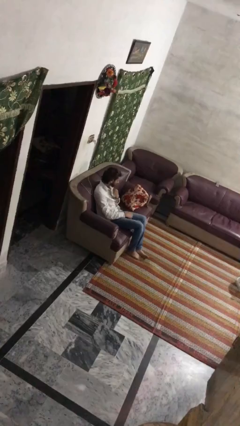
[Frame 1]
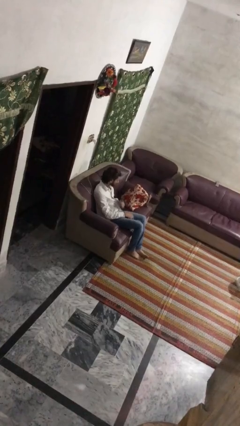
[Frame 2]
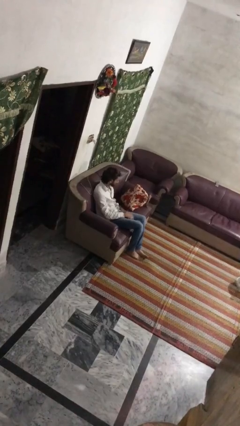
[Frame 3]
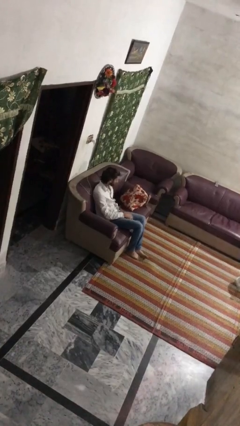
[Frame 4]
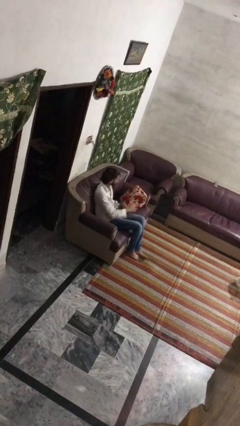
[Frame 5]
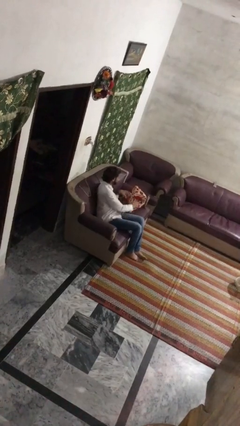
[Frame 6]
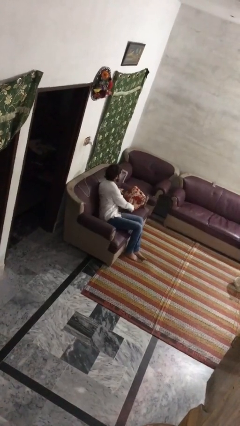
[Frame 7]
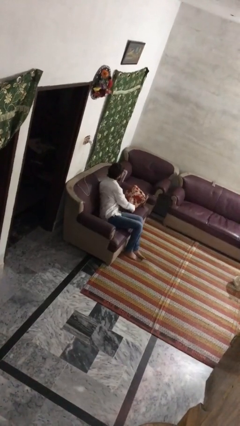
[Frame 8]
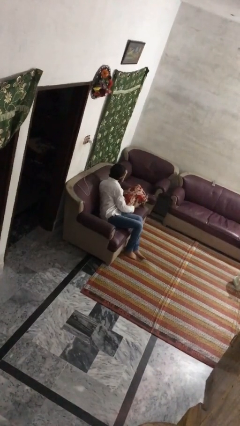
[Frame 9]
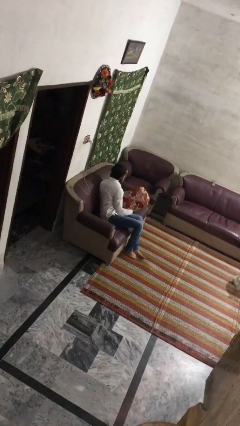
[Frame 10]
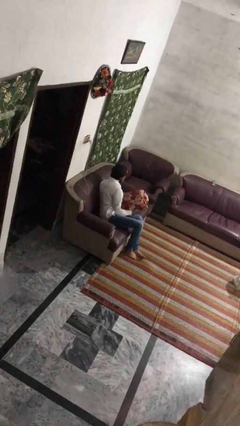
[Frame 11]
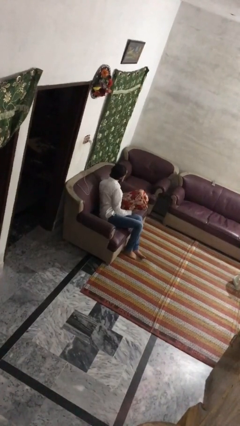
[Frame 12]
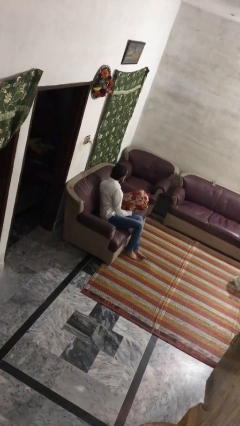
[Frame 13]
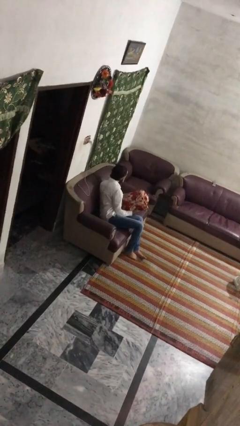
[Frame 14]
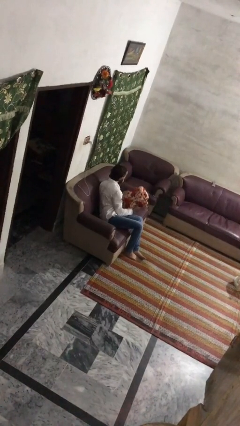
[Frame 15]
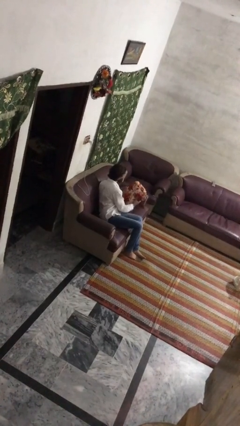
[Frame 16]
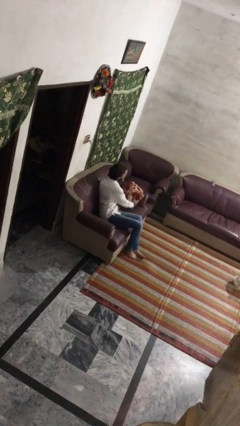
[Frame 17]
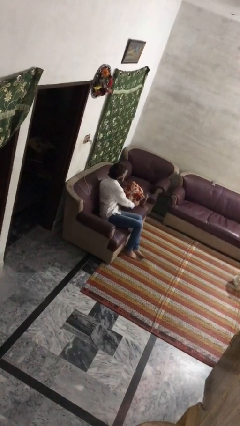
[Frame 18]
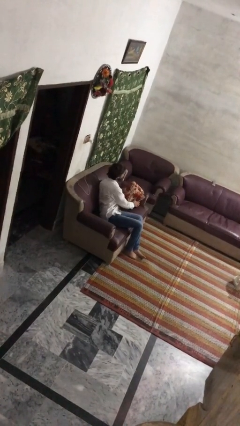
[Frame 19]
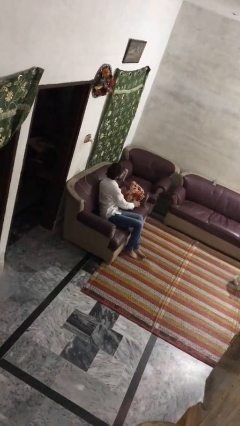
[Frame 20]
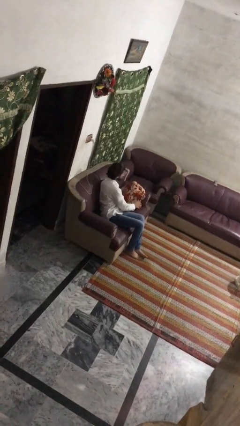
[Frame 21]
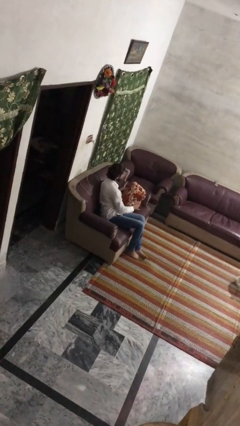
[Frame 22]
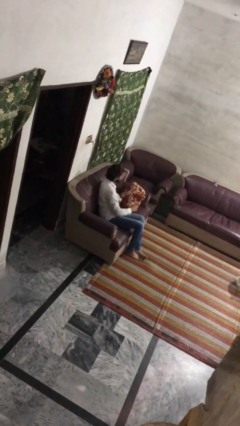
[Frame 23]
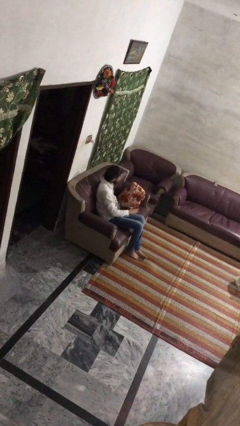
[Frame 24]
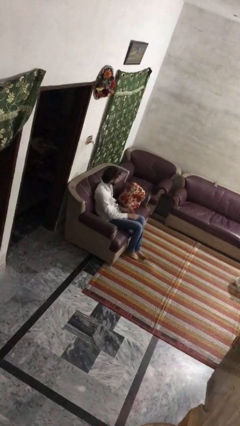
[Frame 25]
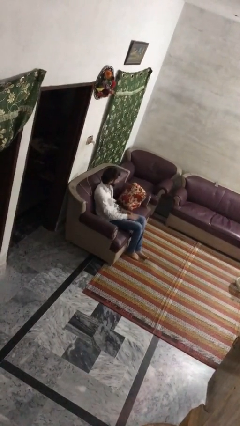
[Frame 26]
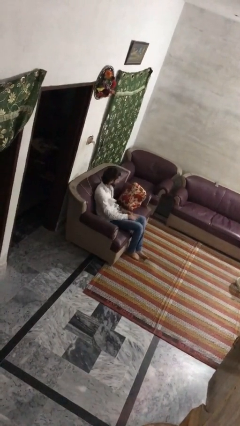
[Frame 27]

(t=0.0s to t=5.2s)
person searches in couch

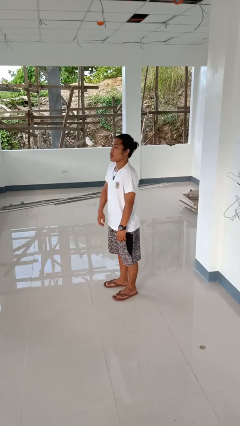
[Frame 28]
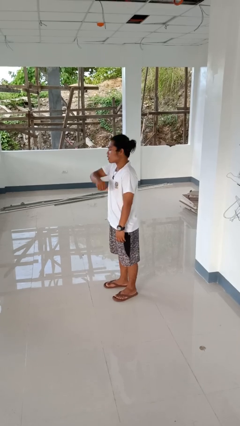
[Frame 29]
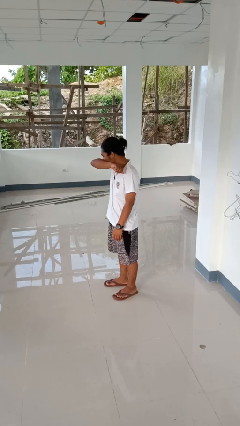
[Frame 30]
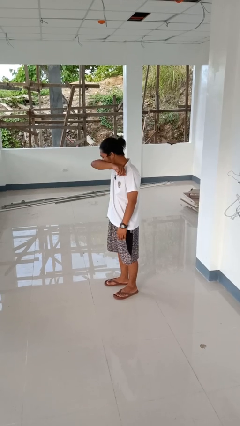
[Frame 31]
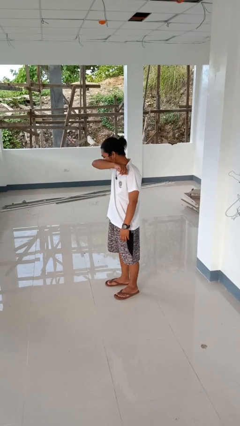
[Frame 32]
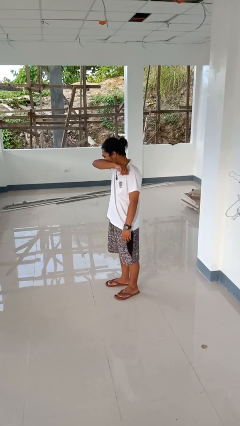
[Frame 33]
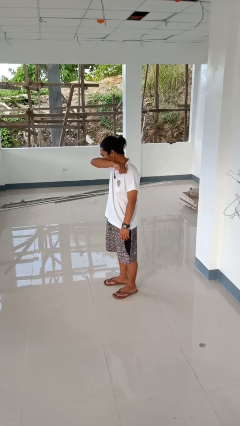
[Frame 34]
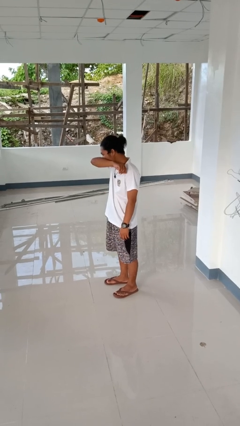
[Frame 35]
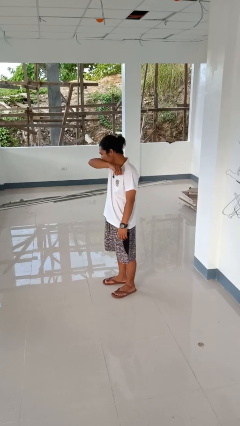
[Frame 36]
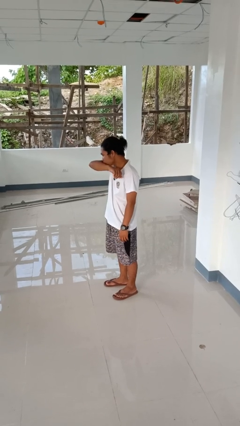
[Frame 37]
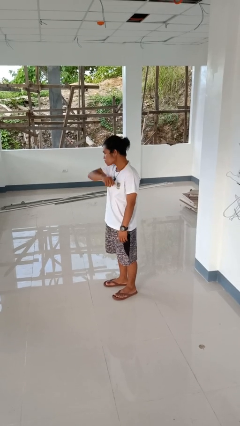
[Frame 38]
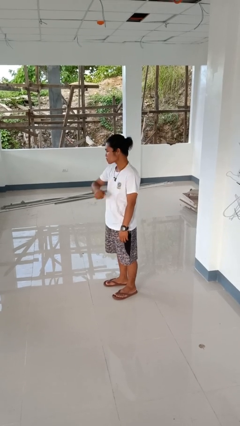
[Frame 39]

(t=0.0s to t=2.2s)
person sneezes into arm

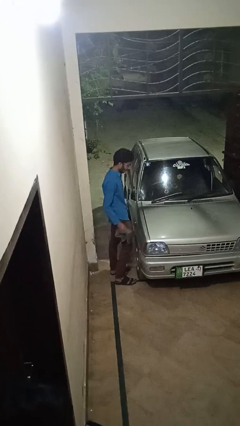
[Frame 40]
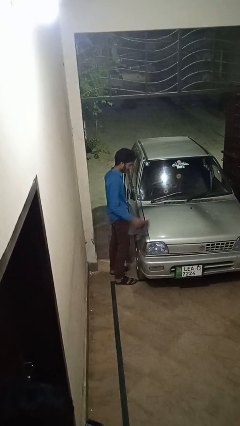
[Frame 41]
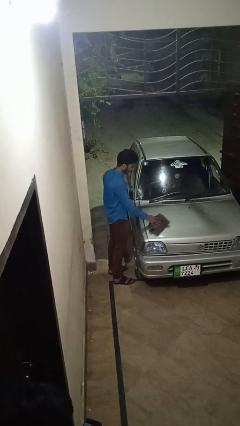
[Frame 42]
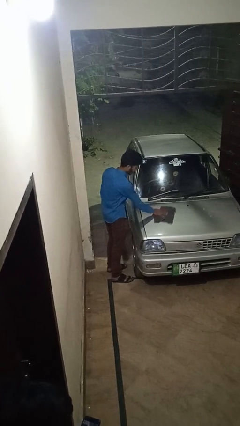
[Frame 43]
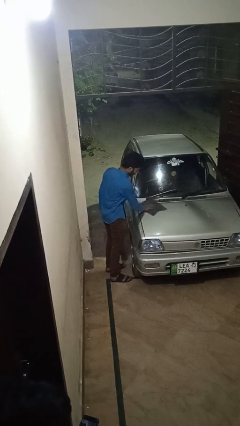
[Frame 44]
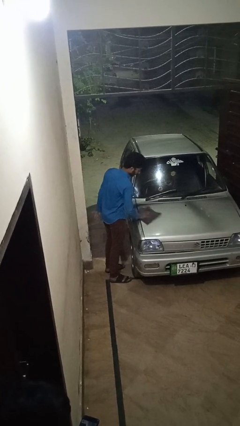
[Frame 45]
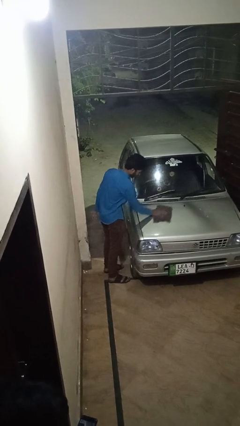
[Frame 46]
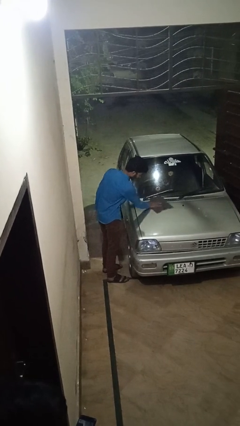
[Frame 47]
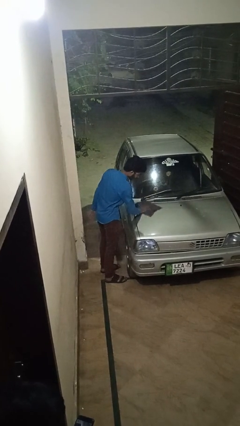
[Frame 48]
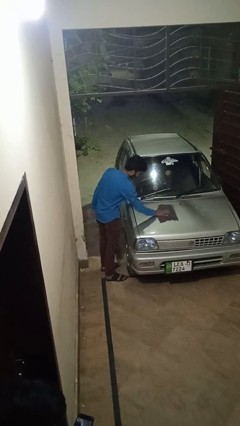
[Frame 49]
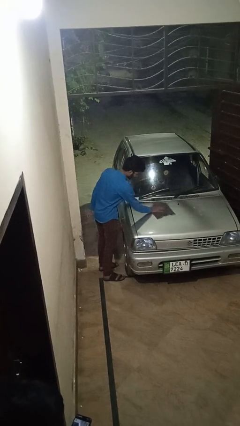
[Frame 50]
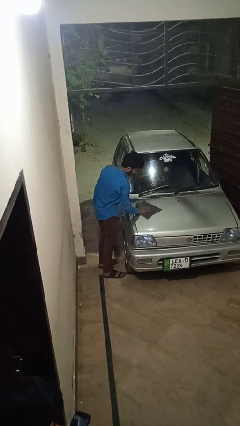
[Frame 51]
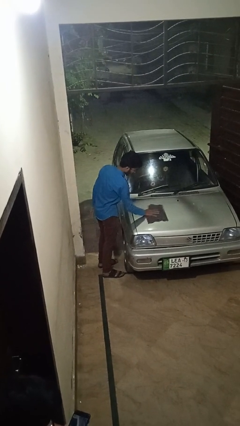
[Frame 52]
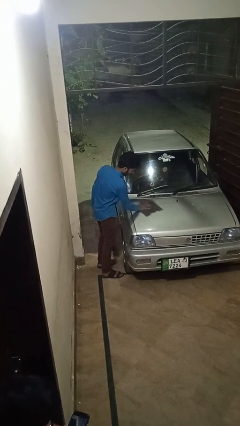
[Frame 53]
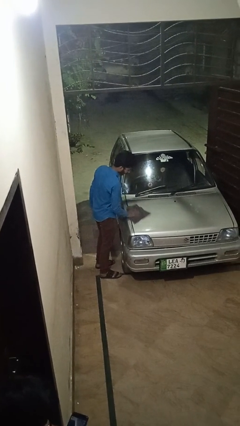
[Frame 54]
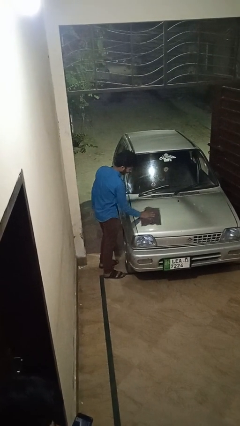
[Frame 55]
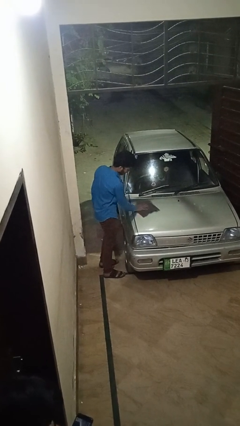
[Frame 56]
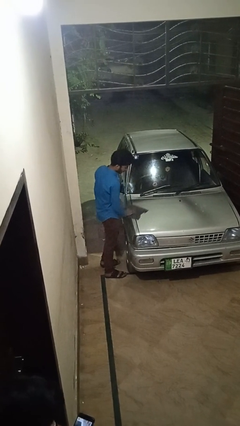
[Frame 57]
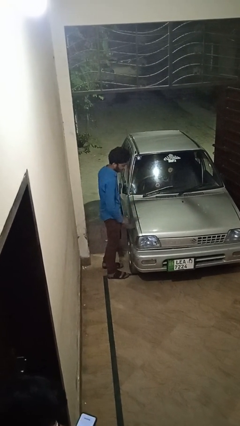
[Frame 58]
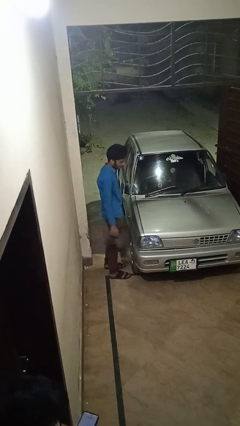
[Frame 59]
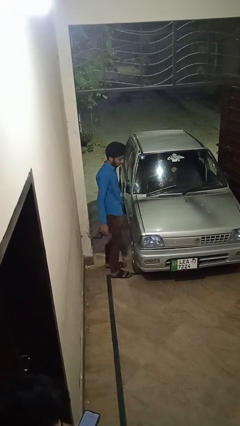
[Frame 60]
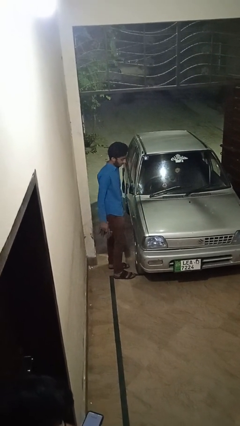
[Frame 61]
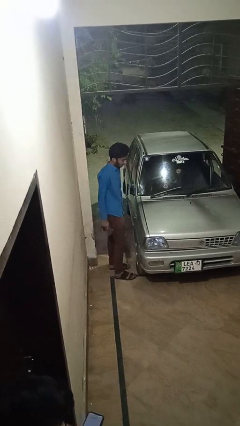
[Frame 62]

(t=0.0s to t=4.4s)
person polishes car with rag

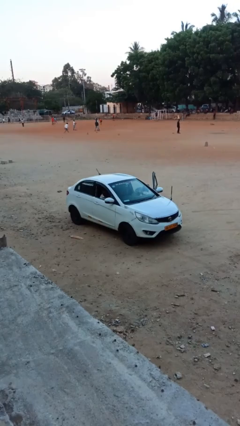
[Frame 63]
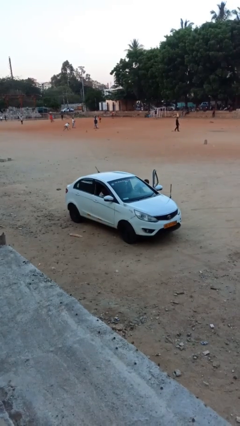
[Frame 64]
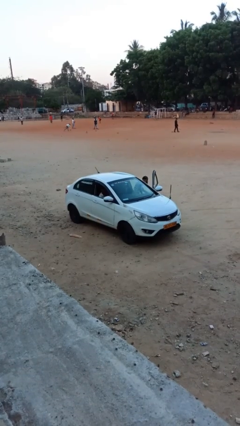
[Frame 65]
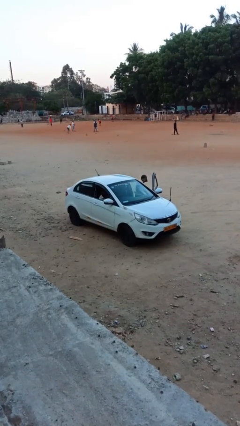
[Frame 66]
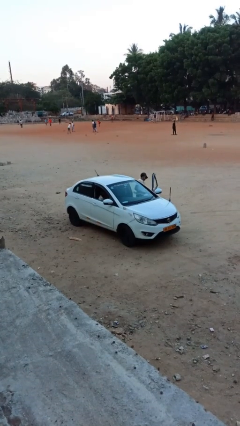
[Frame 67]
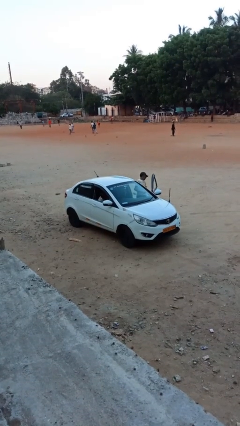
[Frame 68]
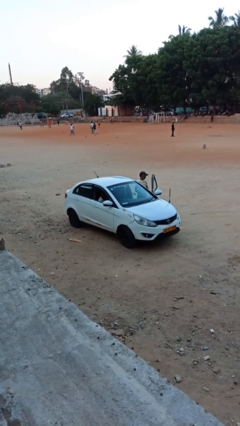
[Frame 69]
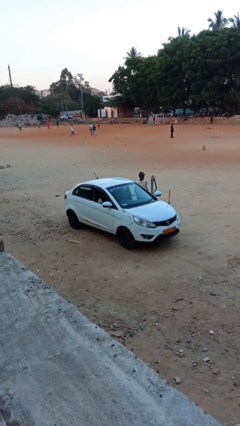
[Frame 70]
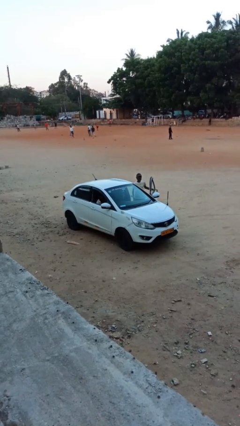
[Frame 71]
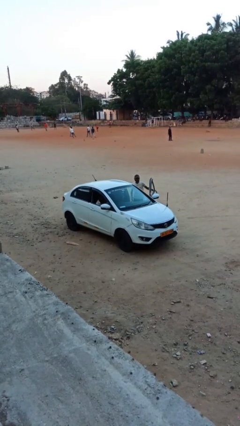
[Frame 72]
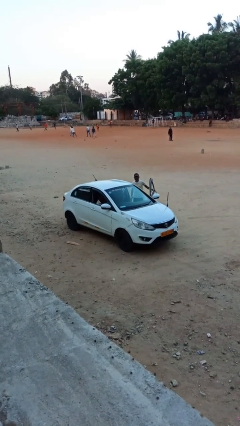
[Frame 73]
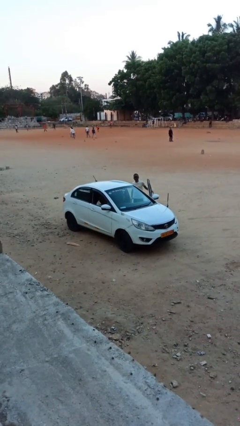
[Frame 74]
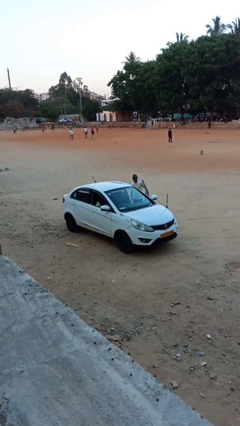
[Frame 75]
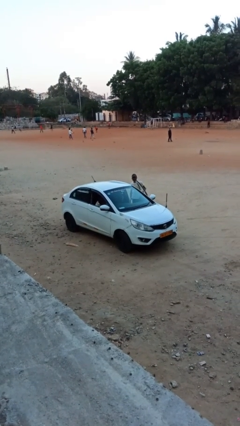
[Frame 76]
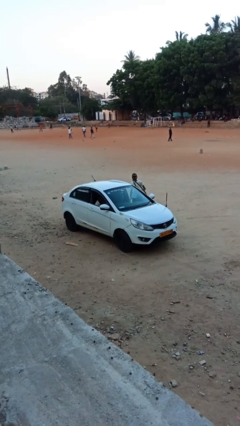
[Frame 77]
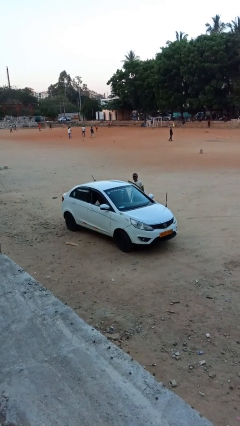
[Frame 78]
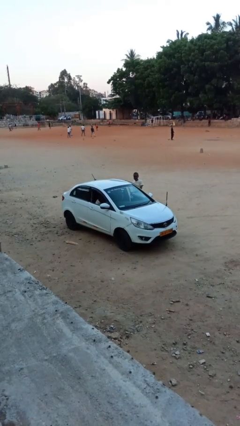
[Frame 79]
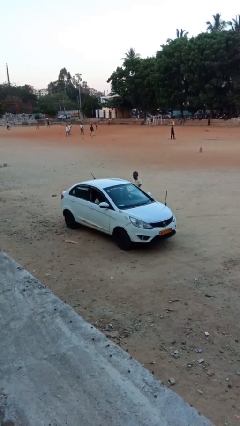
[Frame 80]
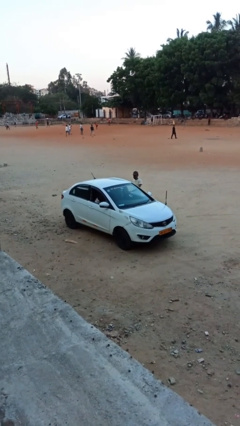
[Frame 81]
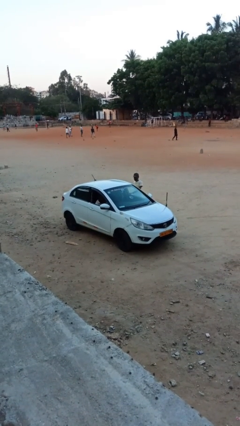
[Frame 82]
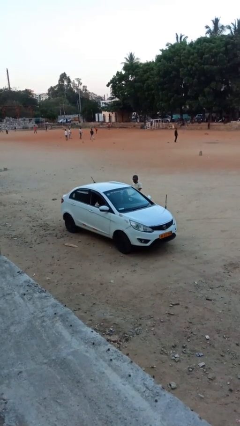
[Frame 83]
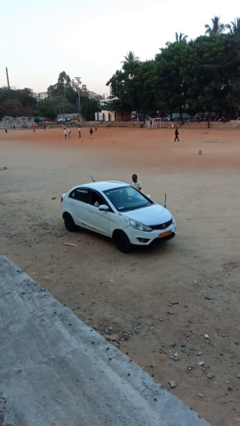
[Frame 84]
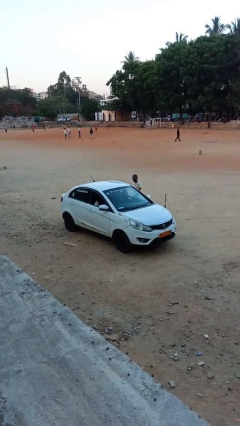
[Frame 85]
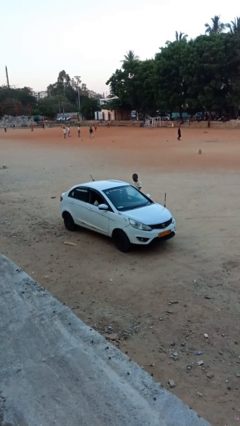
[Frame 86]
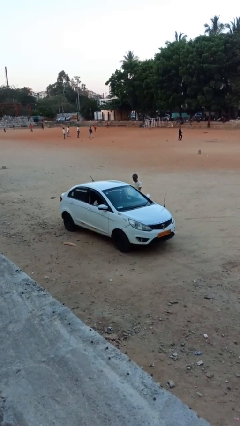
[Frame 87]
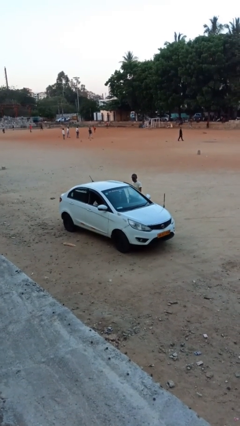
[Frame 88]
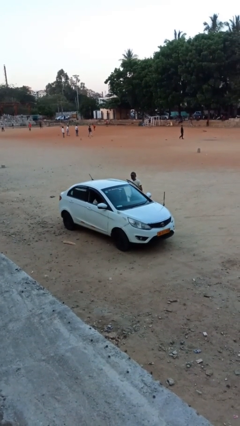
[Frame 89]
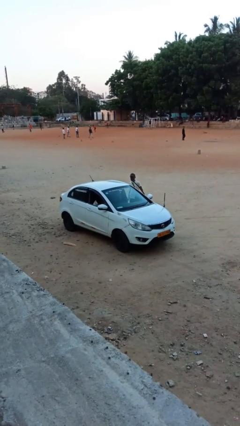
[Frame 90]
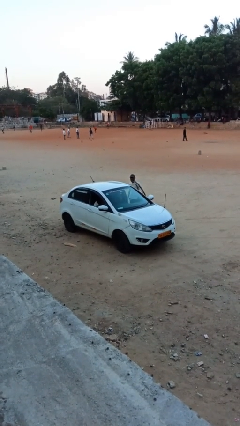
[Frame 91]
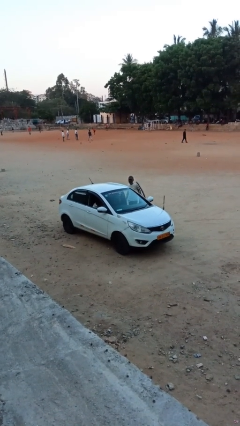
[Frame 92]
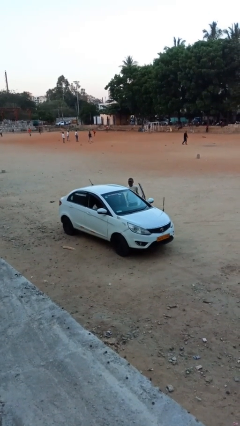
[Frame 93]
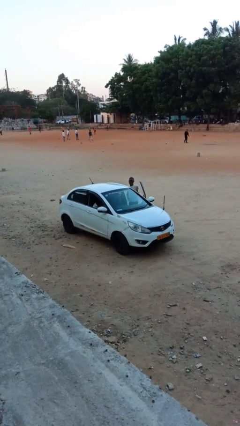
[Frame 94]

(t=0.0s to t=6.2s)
car drops off person
